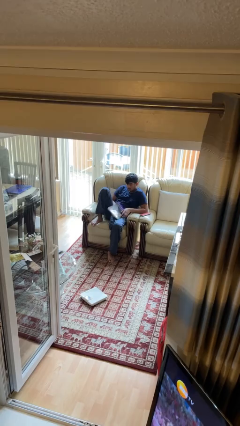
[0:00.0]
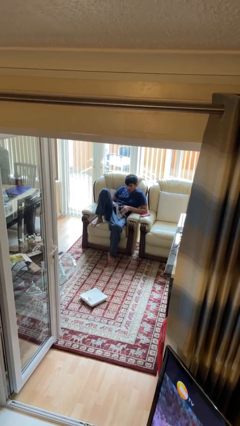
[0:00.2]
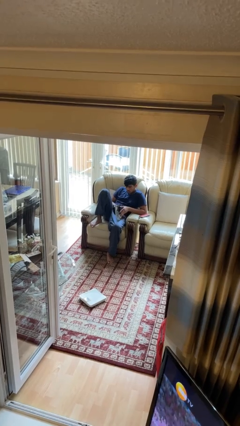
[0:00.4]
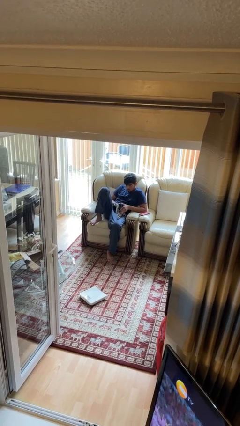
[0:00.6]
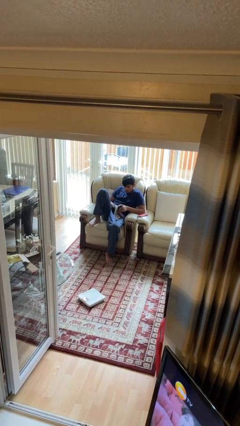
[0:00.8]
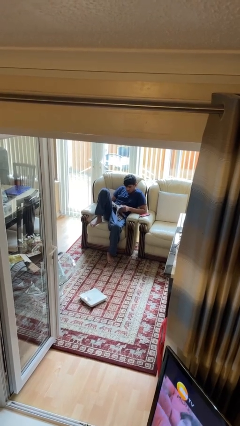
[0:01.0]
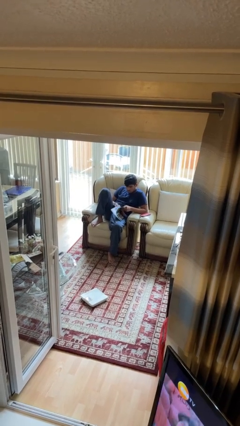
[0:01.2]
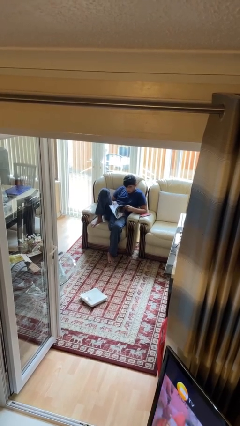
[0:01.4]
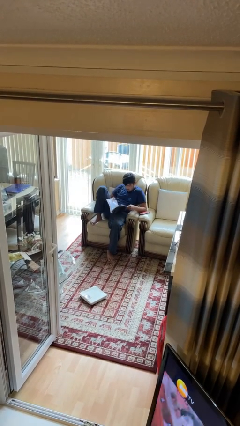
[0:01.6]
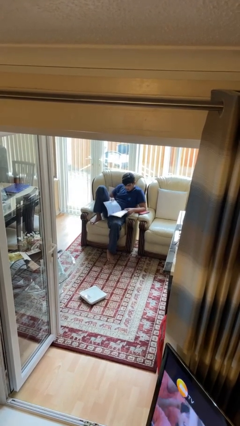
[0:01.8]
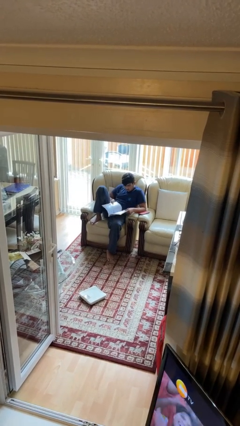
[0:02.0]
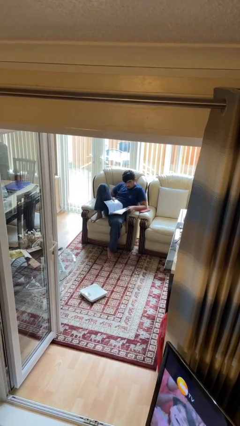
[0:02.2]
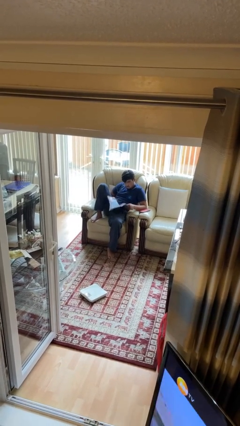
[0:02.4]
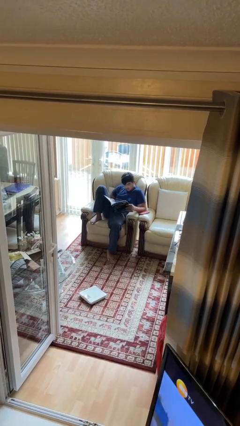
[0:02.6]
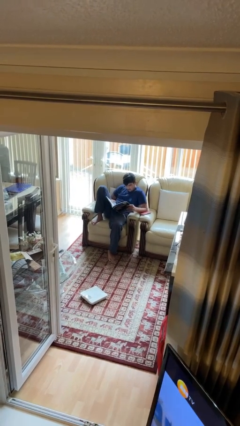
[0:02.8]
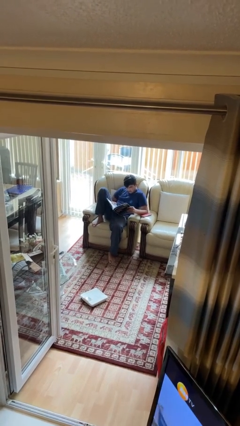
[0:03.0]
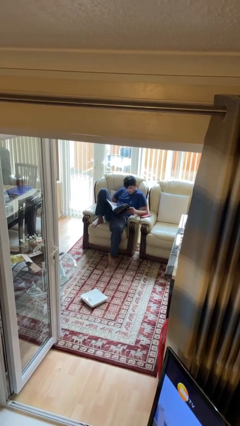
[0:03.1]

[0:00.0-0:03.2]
person reads magazine

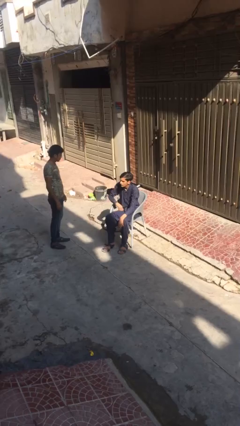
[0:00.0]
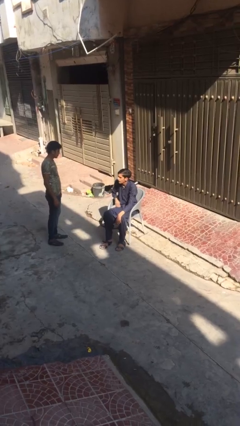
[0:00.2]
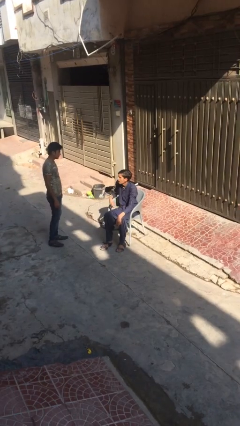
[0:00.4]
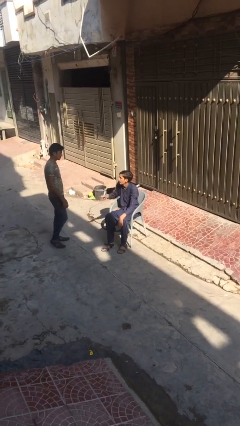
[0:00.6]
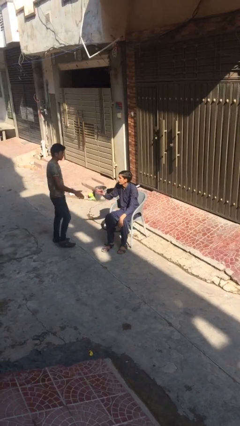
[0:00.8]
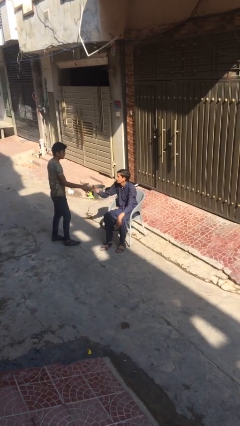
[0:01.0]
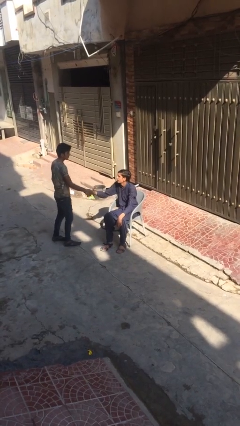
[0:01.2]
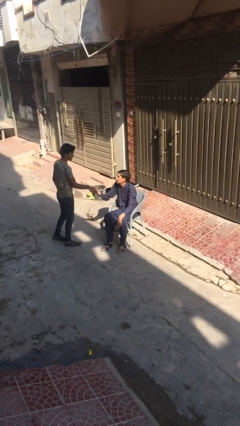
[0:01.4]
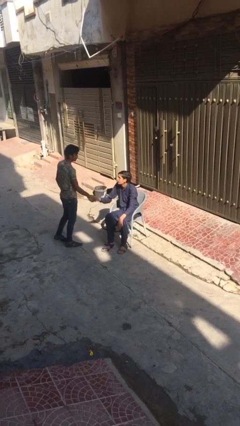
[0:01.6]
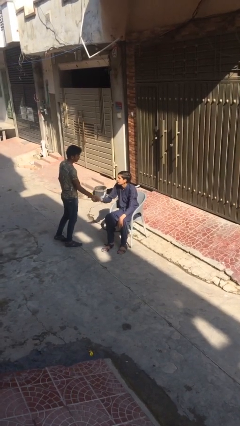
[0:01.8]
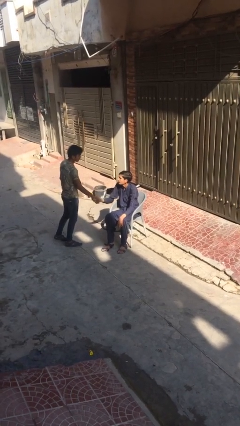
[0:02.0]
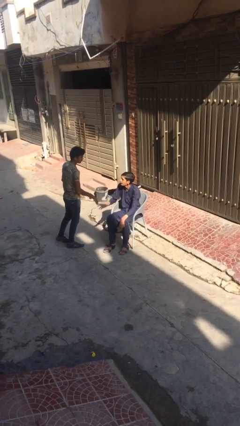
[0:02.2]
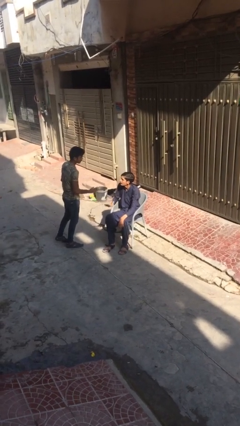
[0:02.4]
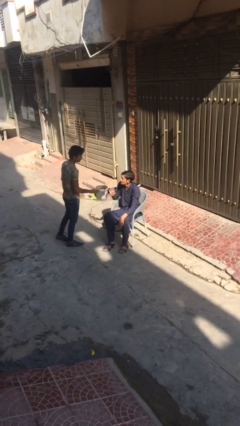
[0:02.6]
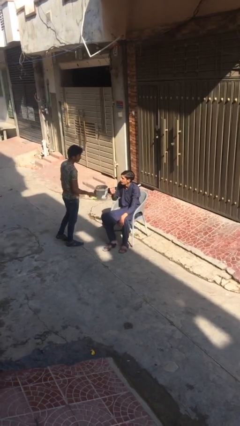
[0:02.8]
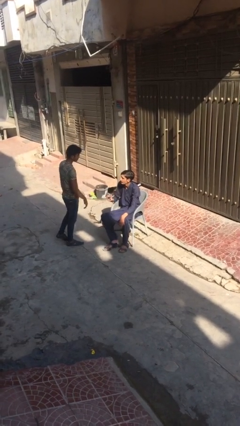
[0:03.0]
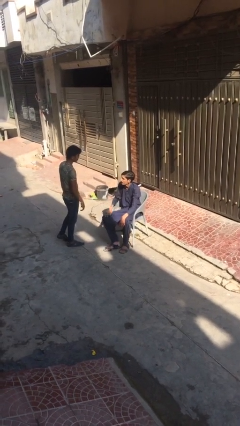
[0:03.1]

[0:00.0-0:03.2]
person shakes hand

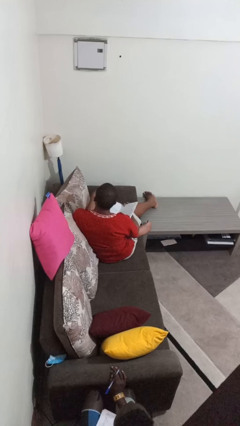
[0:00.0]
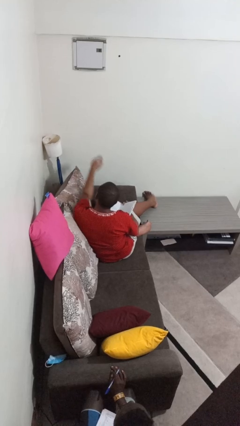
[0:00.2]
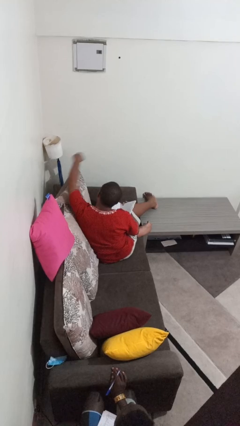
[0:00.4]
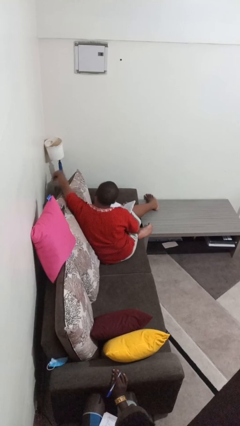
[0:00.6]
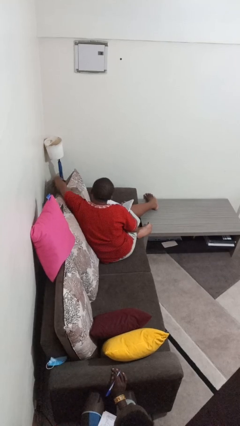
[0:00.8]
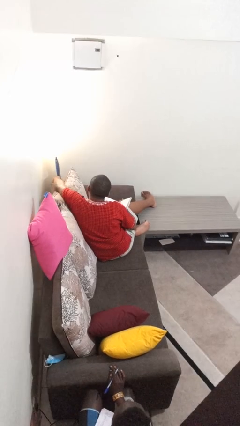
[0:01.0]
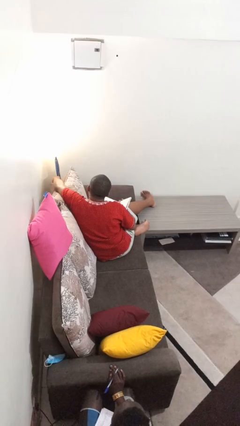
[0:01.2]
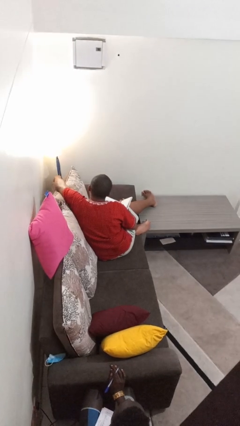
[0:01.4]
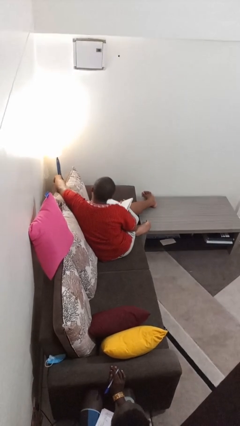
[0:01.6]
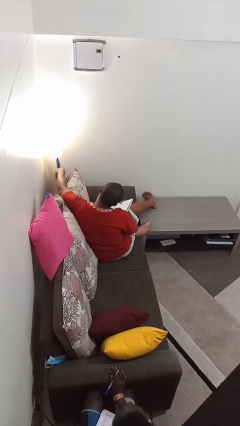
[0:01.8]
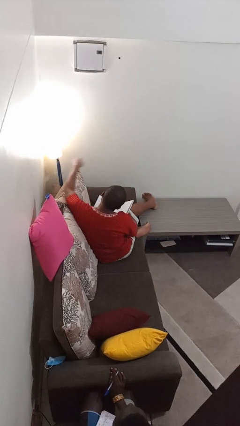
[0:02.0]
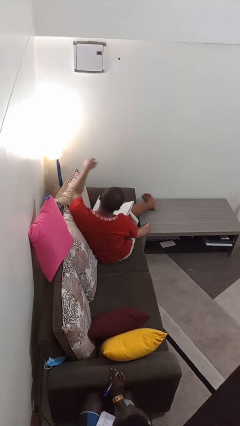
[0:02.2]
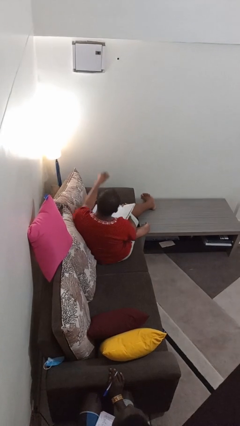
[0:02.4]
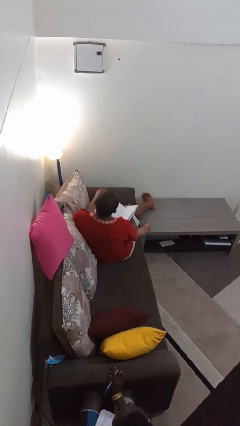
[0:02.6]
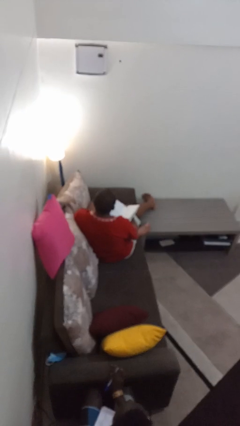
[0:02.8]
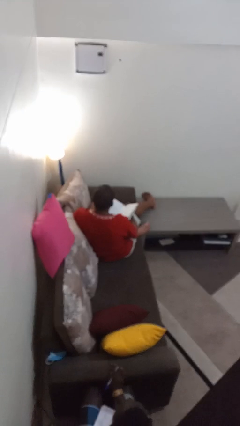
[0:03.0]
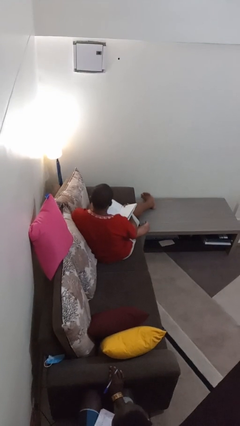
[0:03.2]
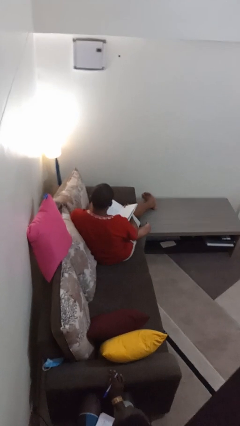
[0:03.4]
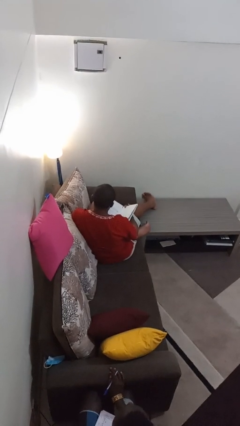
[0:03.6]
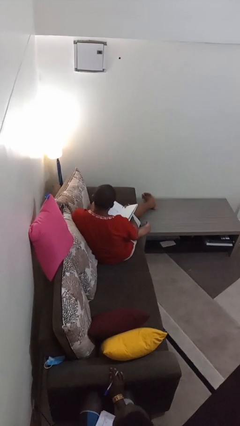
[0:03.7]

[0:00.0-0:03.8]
person turns on lamp

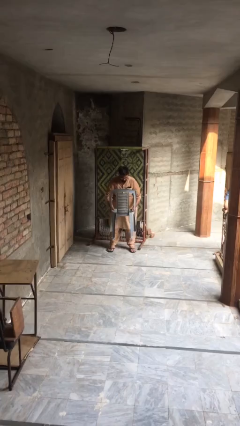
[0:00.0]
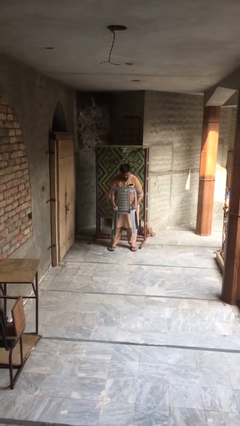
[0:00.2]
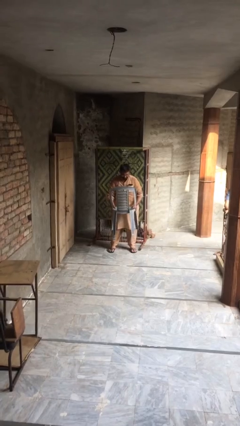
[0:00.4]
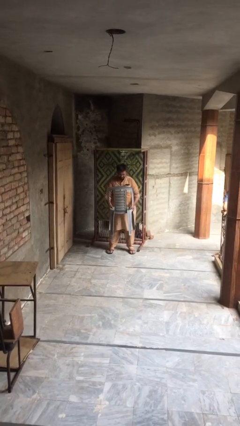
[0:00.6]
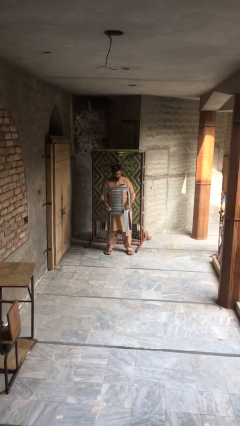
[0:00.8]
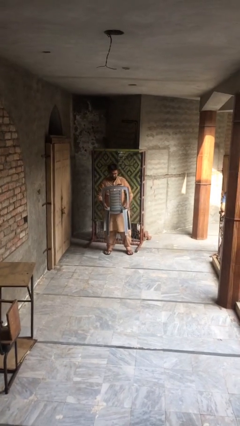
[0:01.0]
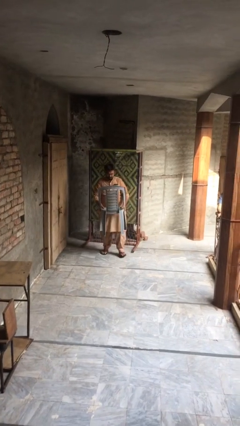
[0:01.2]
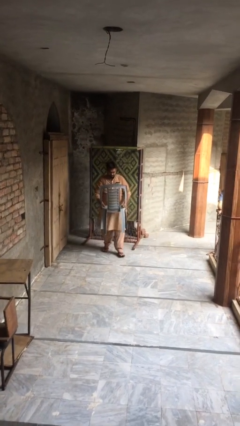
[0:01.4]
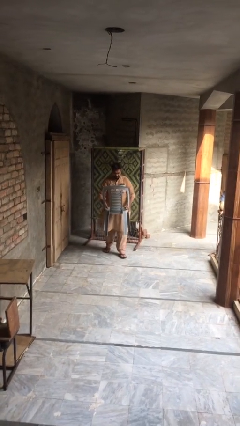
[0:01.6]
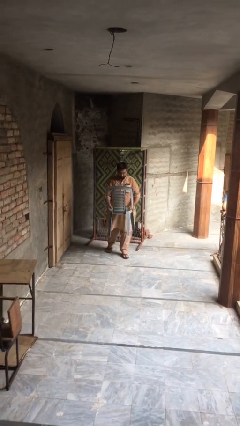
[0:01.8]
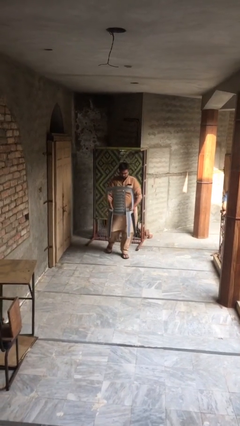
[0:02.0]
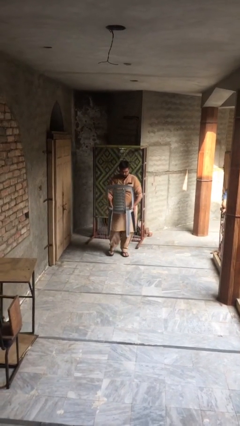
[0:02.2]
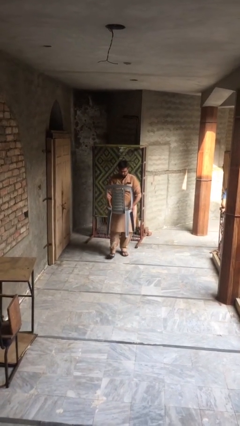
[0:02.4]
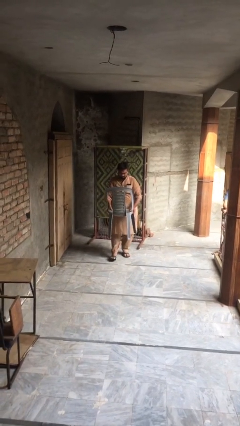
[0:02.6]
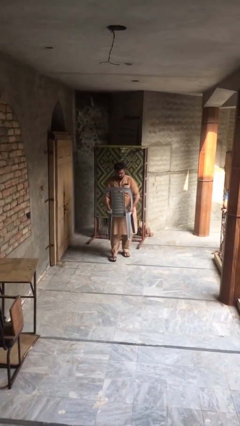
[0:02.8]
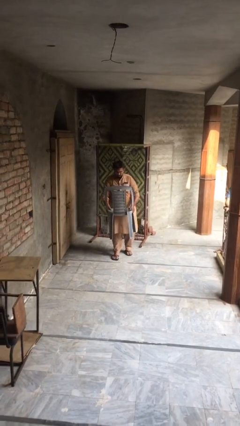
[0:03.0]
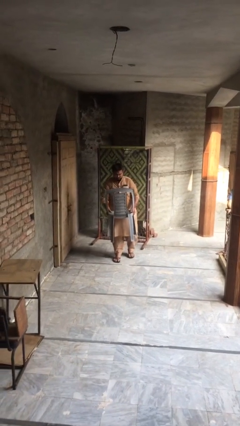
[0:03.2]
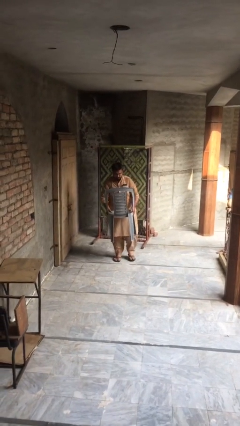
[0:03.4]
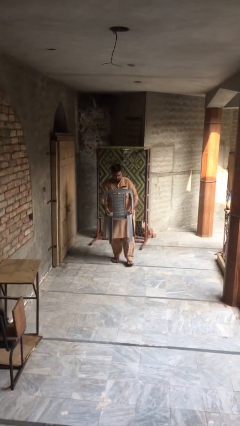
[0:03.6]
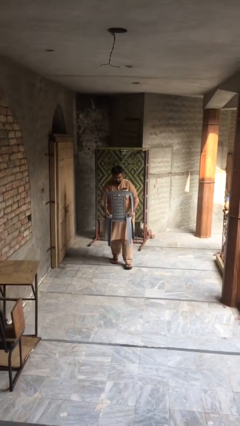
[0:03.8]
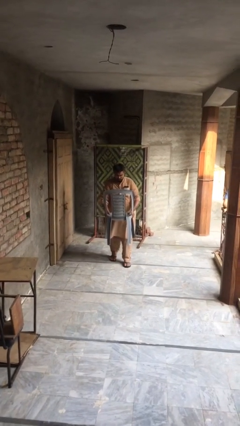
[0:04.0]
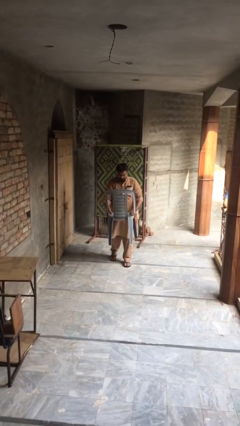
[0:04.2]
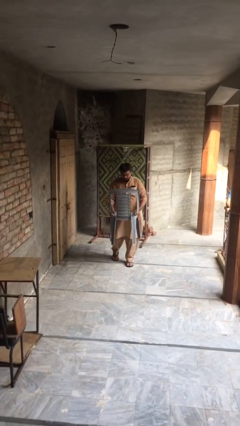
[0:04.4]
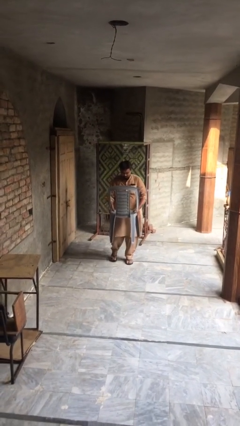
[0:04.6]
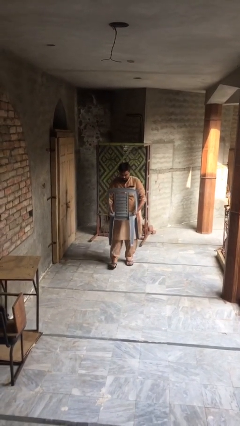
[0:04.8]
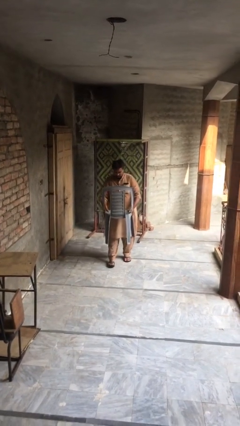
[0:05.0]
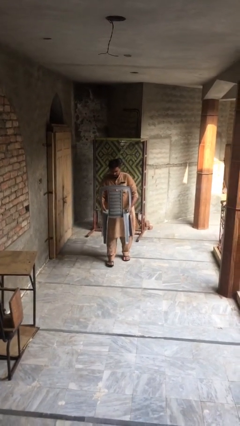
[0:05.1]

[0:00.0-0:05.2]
person carries heavy object

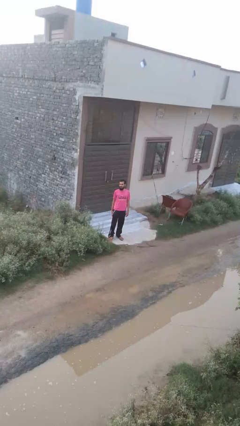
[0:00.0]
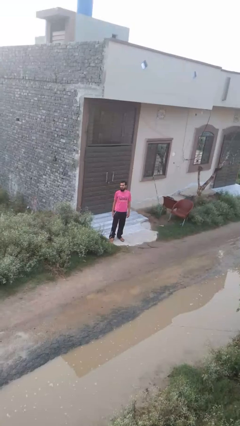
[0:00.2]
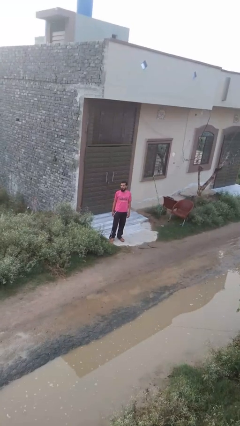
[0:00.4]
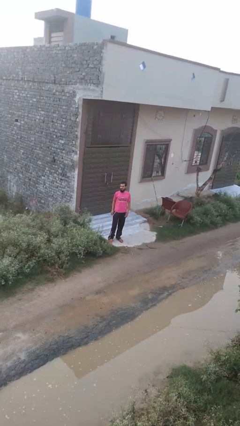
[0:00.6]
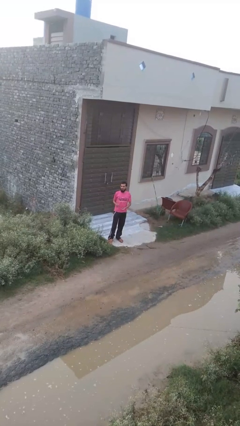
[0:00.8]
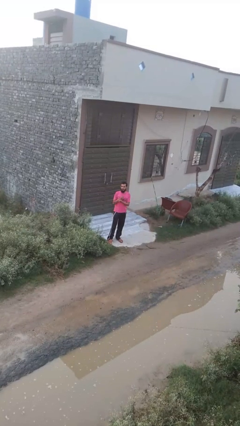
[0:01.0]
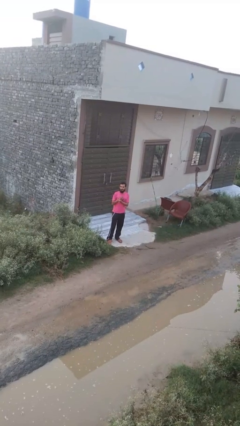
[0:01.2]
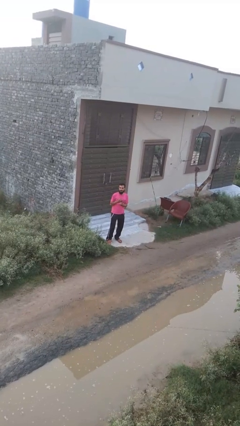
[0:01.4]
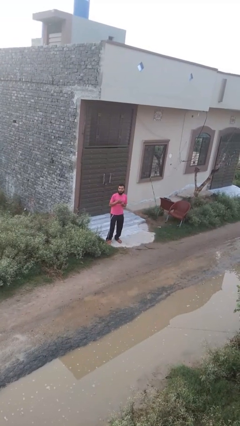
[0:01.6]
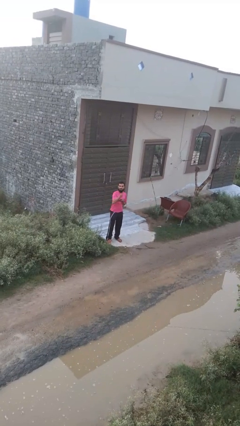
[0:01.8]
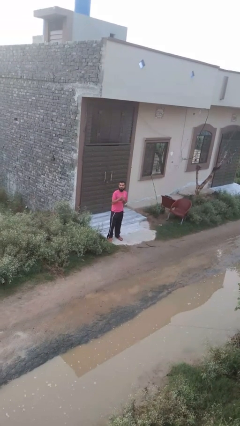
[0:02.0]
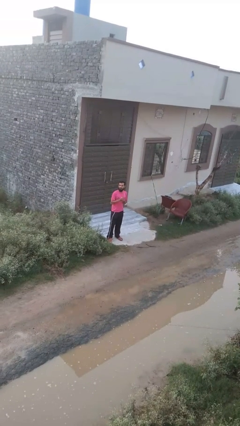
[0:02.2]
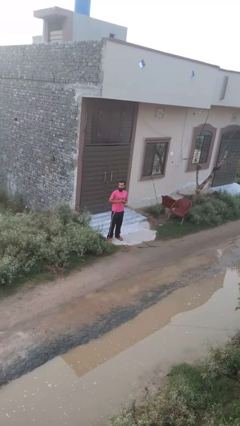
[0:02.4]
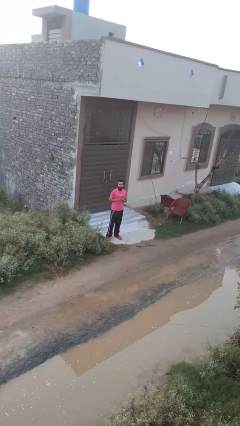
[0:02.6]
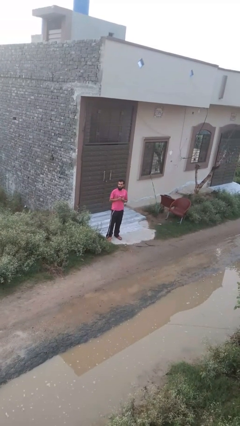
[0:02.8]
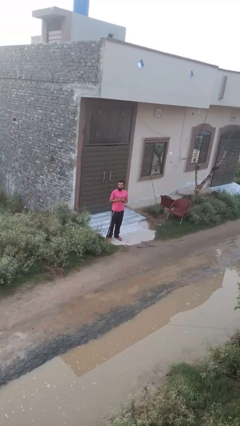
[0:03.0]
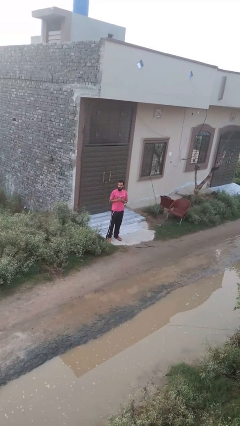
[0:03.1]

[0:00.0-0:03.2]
person punches
